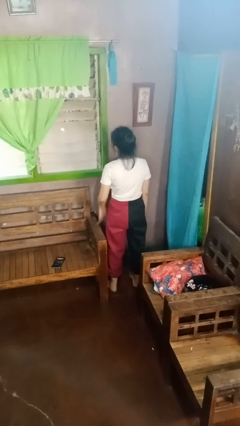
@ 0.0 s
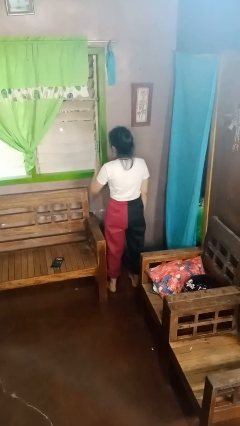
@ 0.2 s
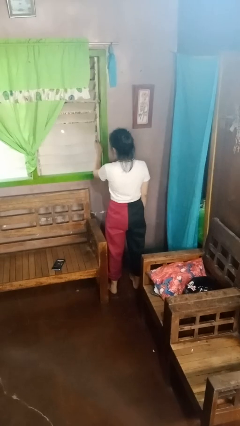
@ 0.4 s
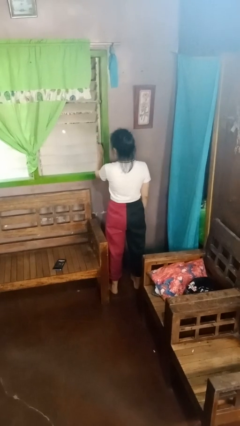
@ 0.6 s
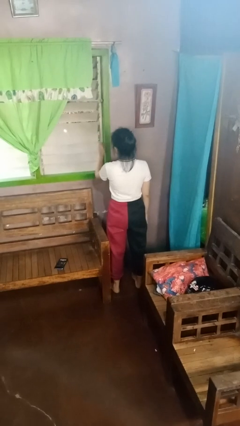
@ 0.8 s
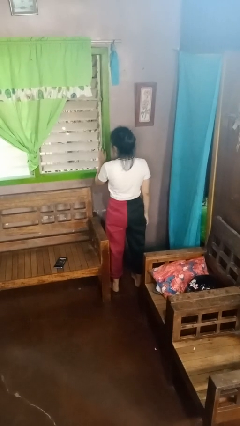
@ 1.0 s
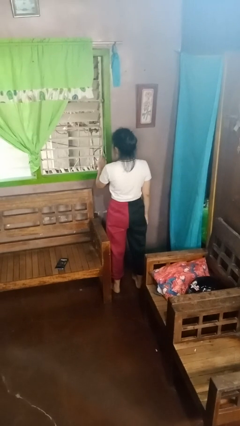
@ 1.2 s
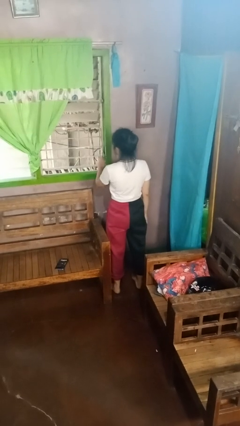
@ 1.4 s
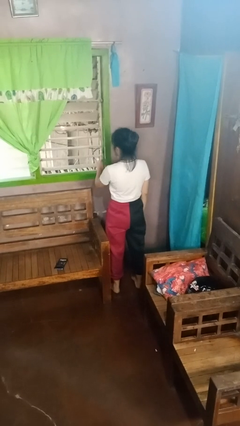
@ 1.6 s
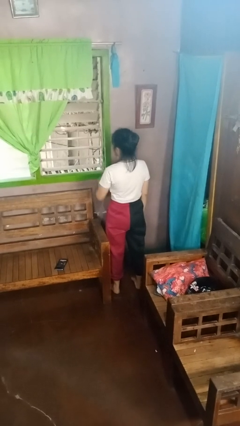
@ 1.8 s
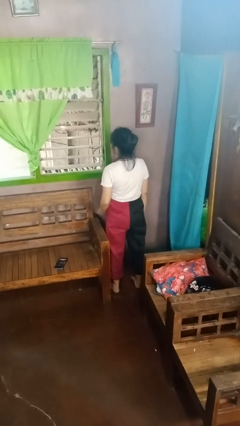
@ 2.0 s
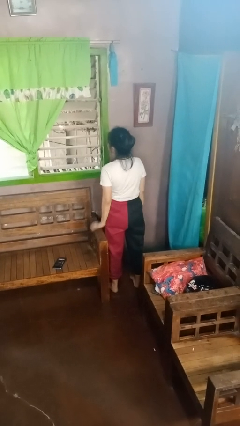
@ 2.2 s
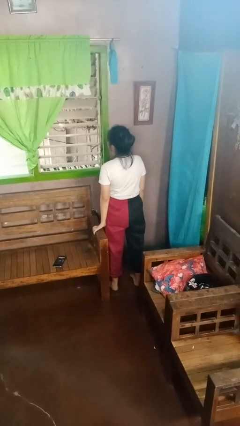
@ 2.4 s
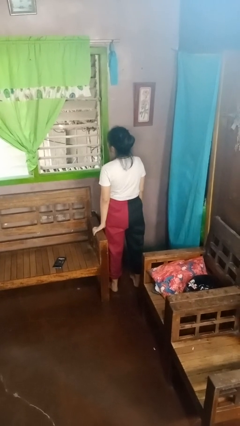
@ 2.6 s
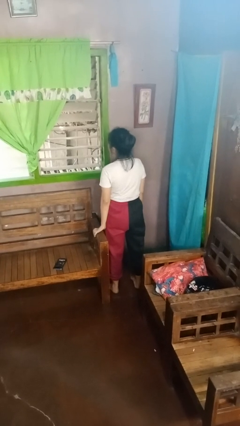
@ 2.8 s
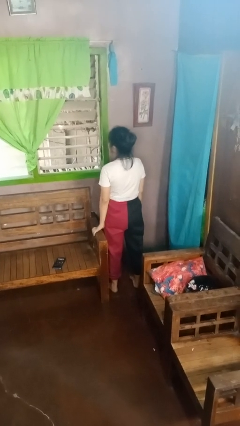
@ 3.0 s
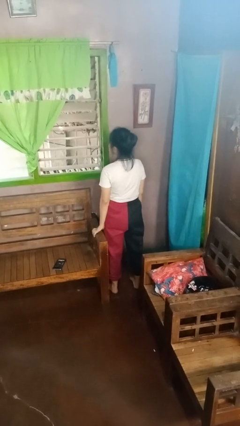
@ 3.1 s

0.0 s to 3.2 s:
person opens home window

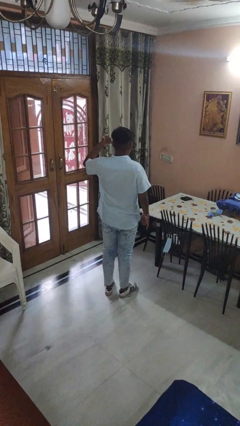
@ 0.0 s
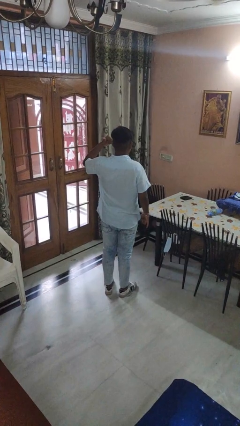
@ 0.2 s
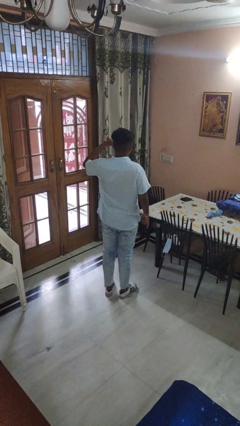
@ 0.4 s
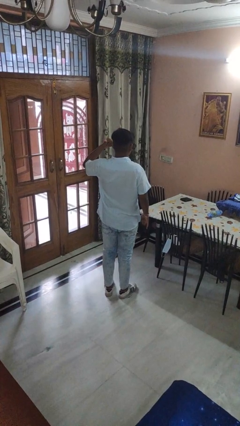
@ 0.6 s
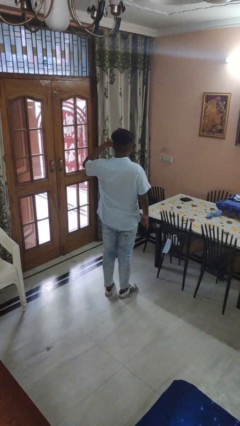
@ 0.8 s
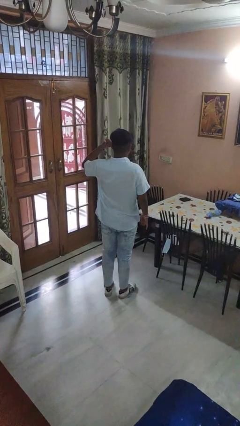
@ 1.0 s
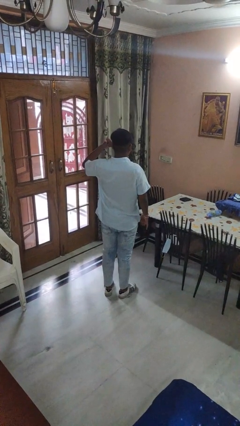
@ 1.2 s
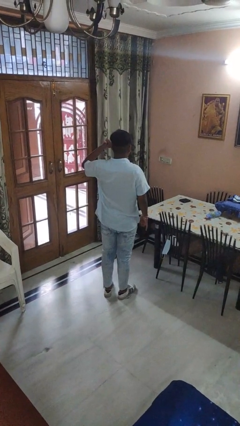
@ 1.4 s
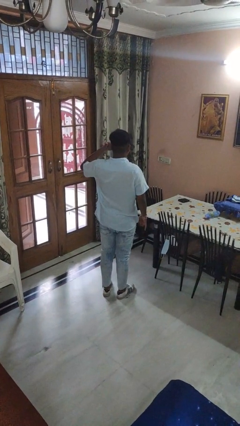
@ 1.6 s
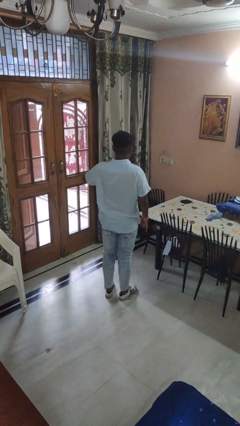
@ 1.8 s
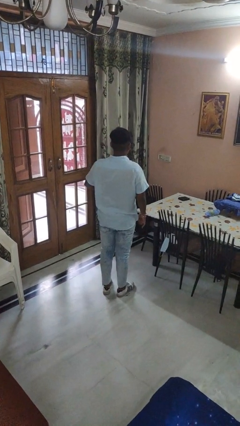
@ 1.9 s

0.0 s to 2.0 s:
person gestures call me

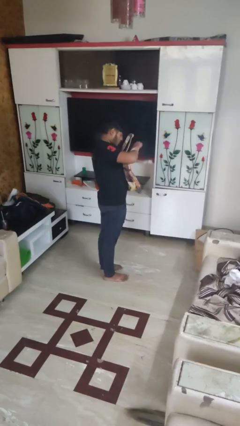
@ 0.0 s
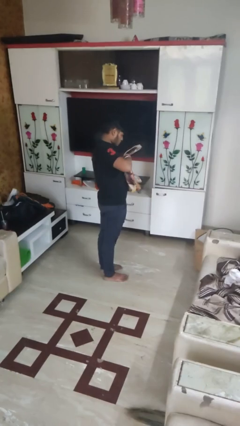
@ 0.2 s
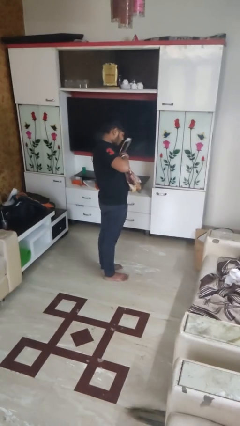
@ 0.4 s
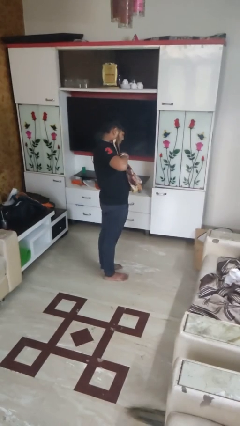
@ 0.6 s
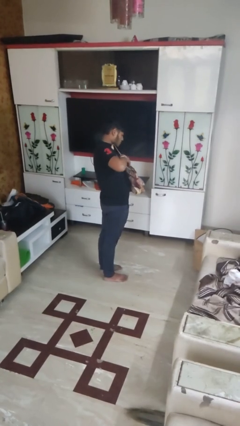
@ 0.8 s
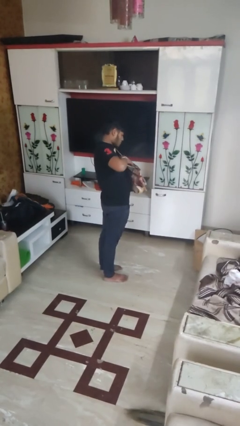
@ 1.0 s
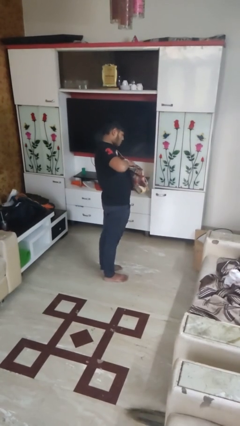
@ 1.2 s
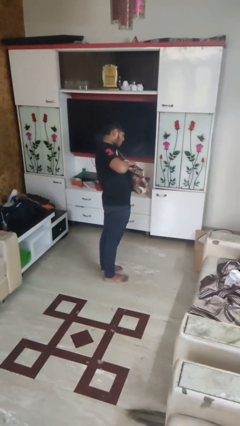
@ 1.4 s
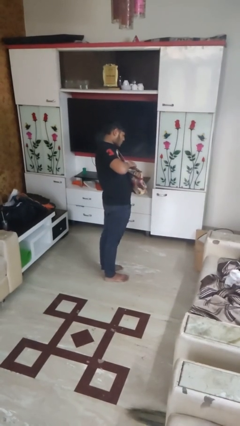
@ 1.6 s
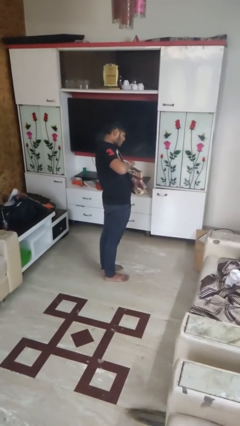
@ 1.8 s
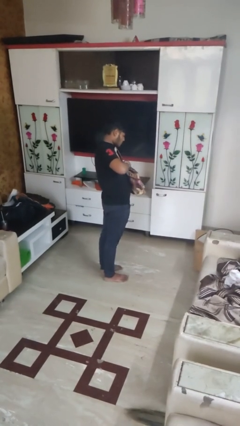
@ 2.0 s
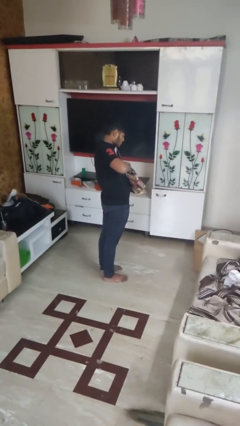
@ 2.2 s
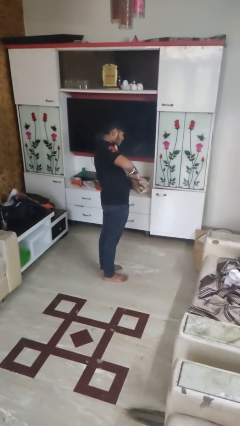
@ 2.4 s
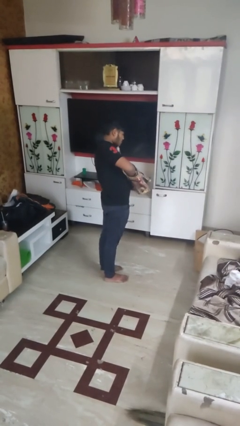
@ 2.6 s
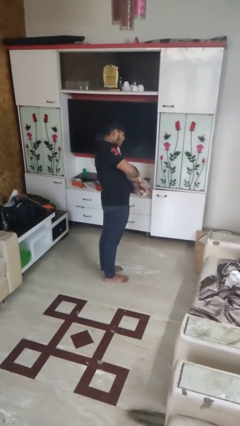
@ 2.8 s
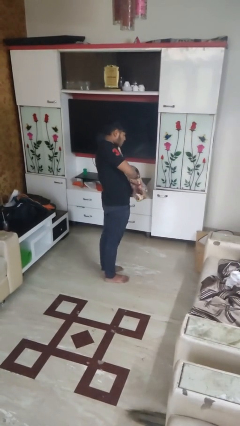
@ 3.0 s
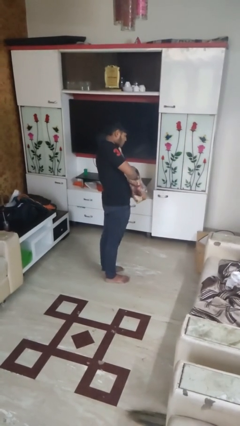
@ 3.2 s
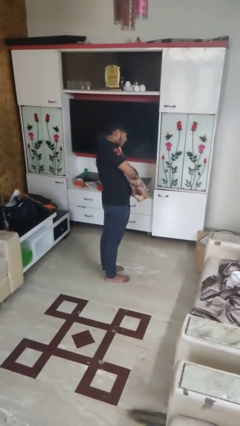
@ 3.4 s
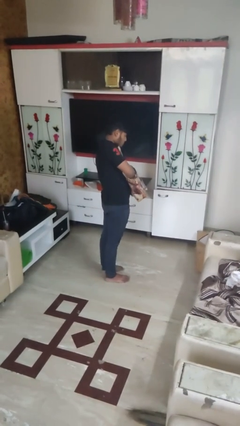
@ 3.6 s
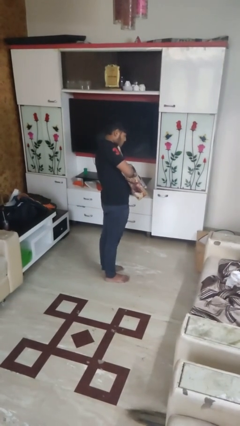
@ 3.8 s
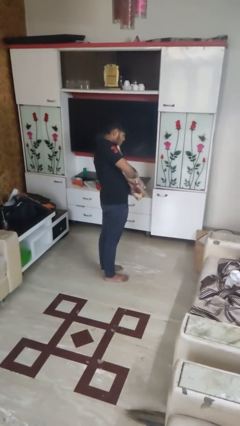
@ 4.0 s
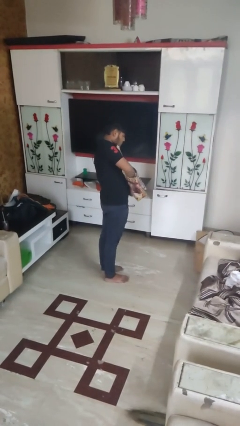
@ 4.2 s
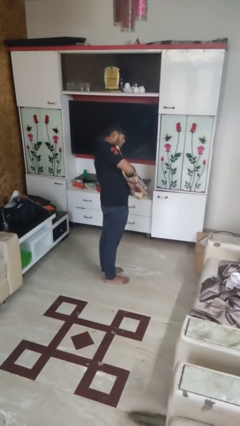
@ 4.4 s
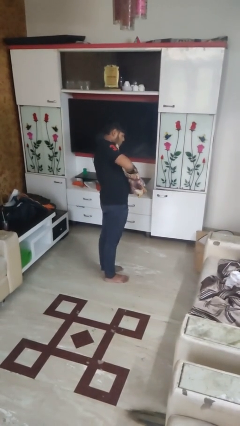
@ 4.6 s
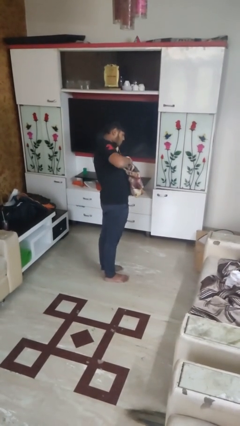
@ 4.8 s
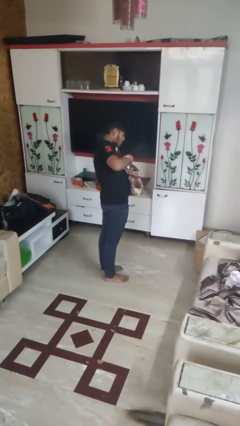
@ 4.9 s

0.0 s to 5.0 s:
person searches in purse

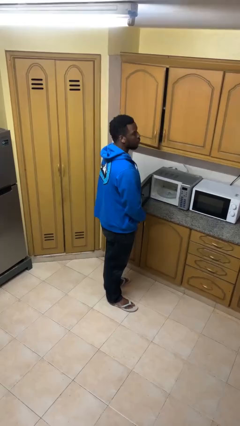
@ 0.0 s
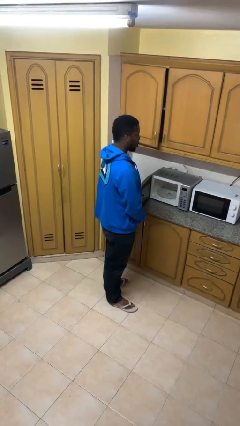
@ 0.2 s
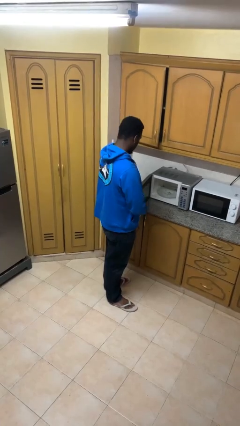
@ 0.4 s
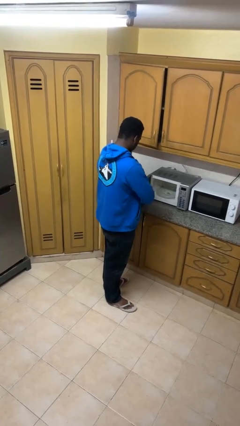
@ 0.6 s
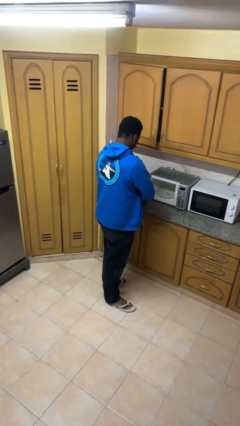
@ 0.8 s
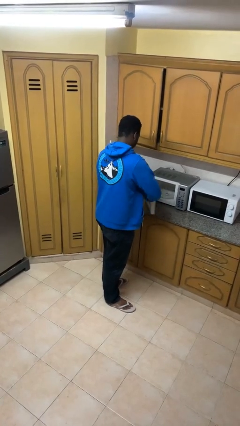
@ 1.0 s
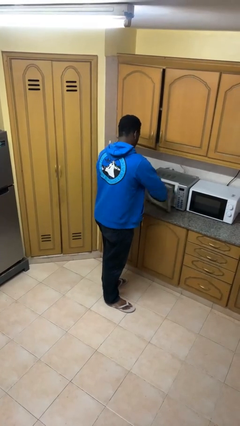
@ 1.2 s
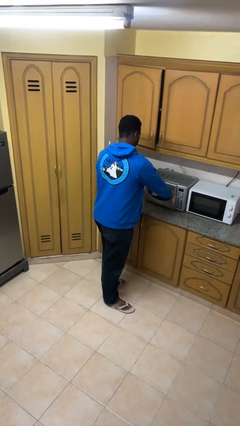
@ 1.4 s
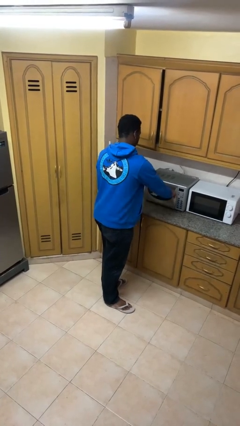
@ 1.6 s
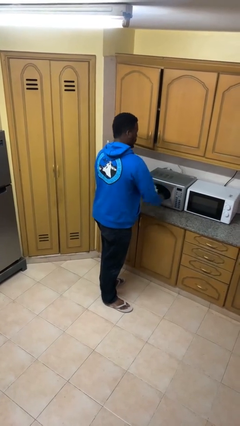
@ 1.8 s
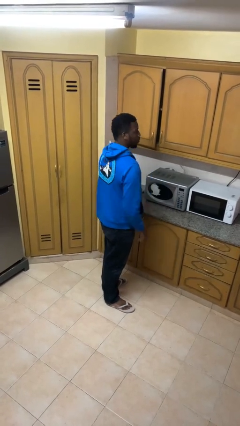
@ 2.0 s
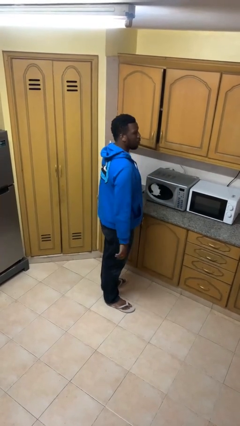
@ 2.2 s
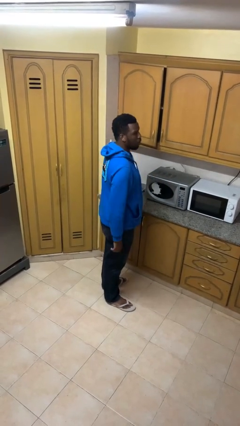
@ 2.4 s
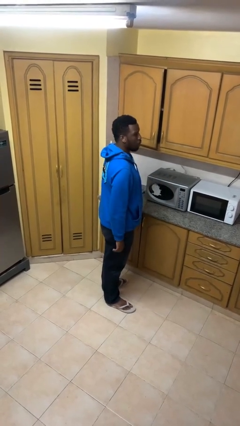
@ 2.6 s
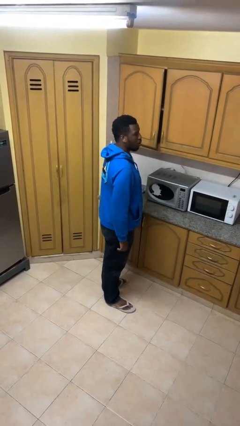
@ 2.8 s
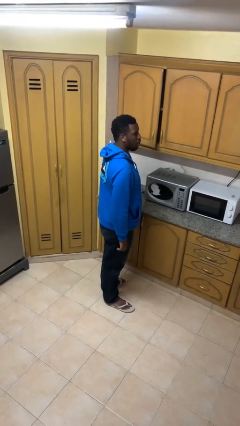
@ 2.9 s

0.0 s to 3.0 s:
person closes microwave

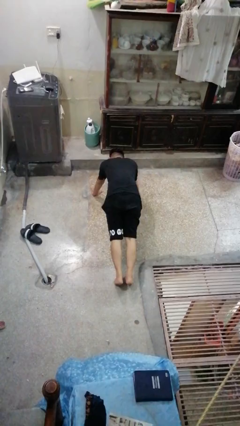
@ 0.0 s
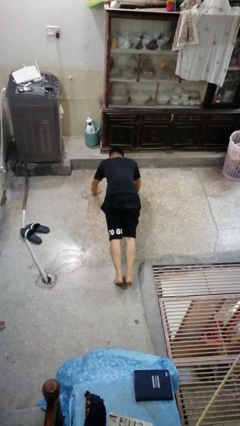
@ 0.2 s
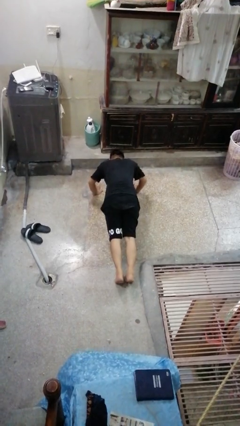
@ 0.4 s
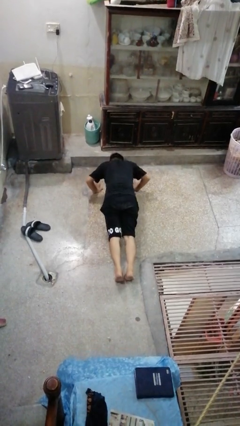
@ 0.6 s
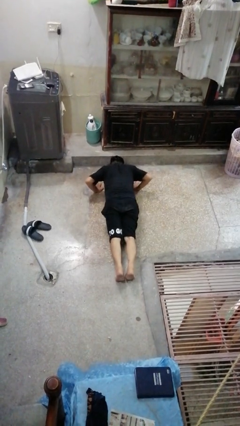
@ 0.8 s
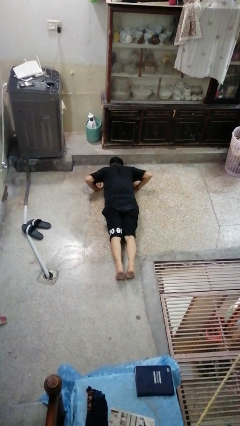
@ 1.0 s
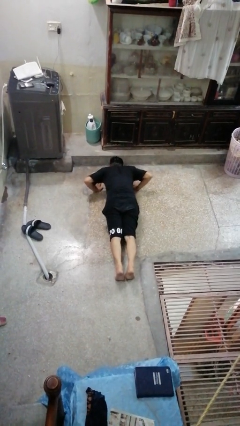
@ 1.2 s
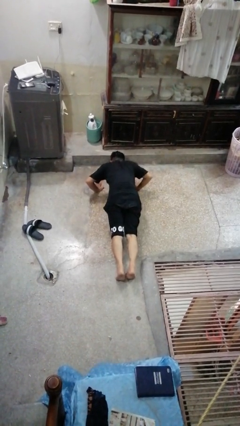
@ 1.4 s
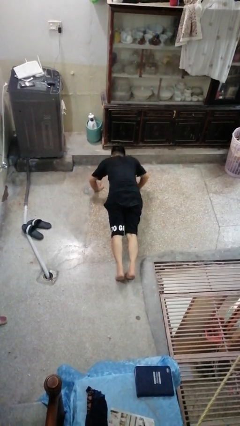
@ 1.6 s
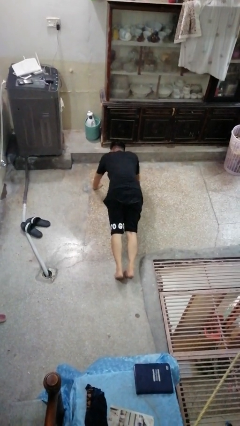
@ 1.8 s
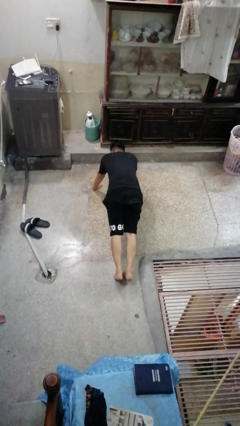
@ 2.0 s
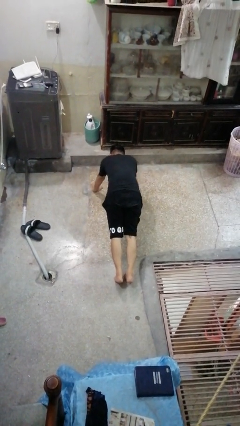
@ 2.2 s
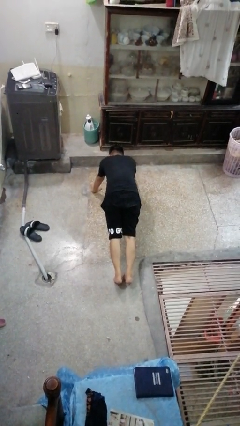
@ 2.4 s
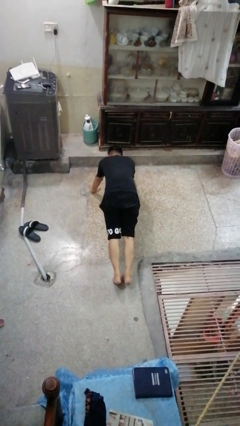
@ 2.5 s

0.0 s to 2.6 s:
person exercises with pushup

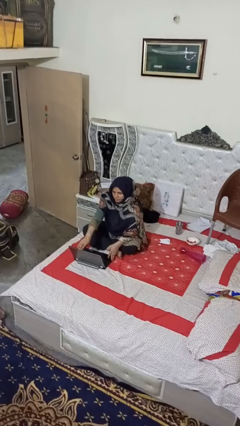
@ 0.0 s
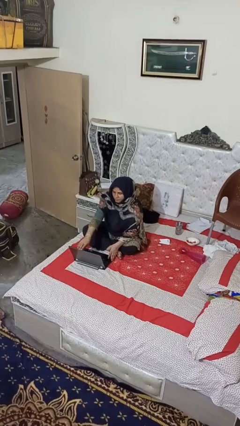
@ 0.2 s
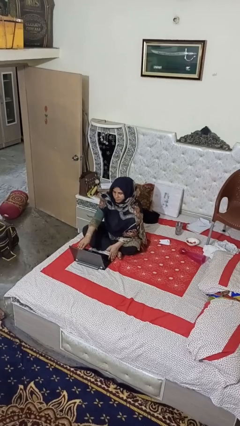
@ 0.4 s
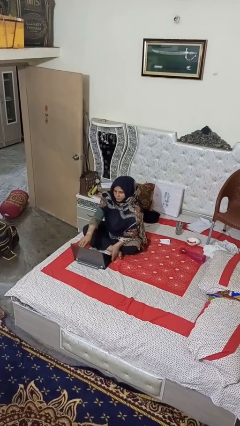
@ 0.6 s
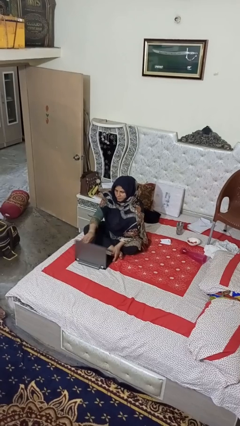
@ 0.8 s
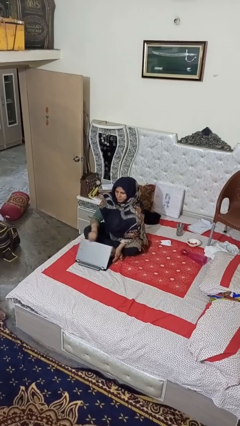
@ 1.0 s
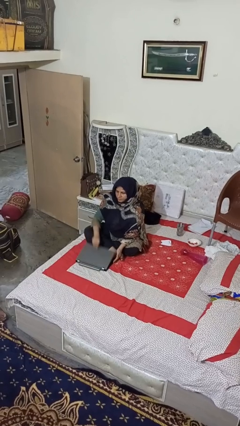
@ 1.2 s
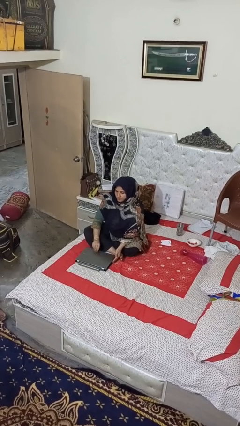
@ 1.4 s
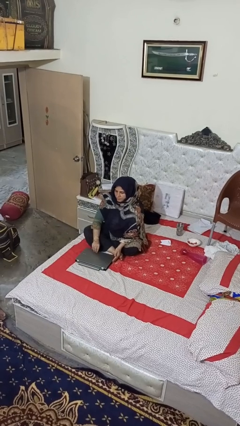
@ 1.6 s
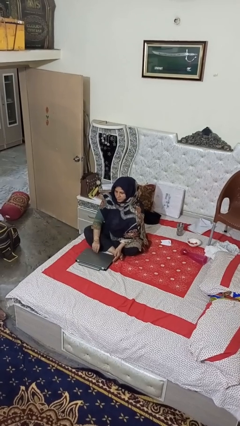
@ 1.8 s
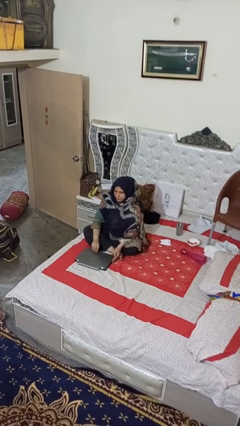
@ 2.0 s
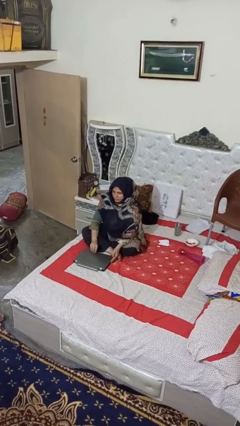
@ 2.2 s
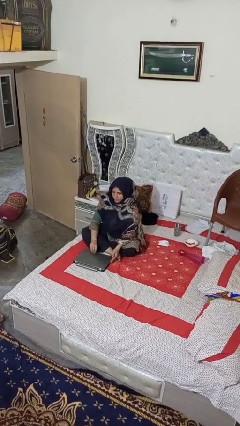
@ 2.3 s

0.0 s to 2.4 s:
person closes laptop
